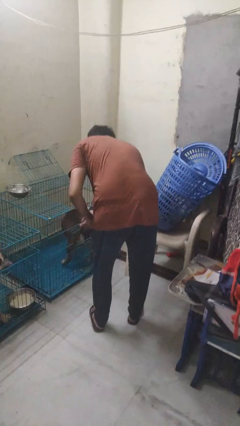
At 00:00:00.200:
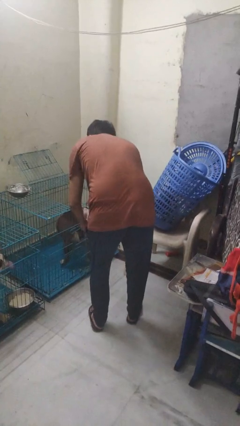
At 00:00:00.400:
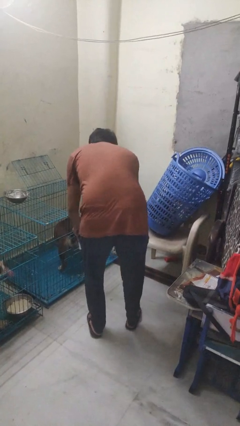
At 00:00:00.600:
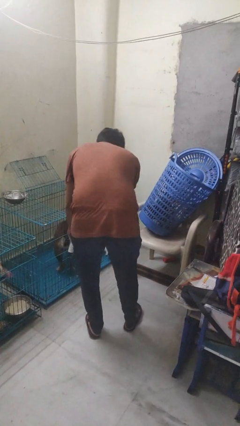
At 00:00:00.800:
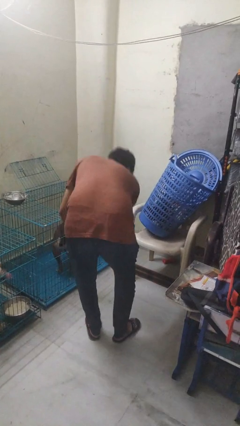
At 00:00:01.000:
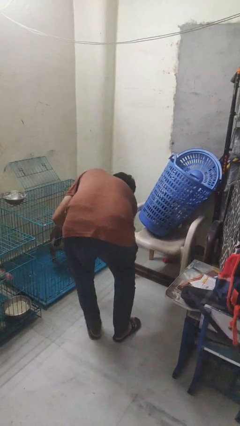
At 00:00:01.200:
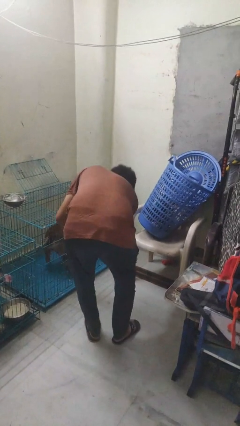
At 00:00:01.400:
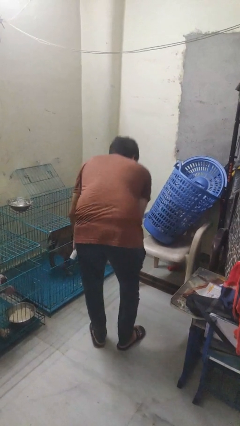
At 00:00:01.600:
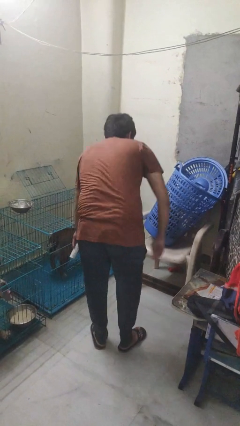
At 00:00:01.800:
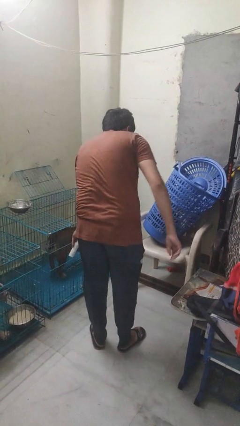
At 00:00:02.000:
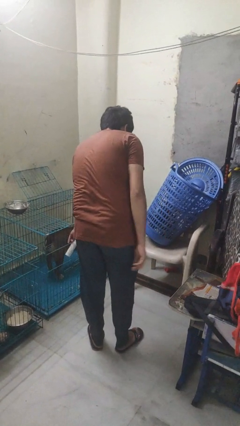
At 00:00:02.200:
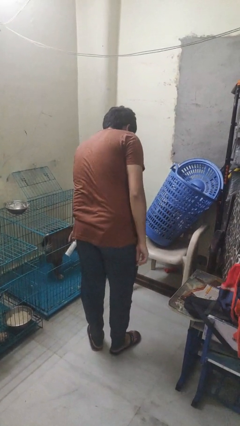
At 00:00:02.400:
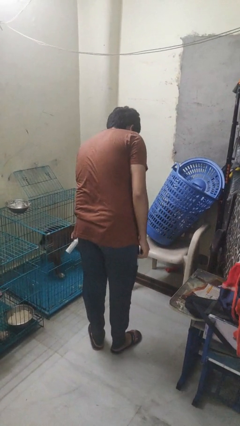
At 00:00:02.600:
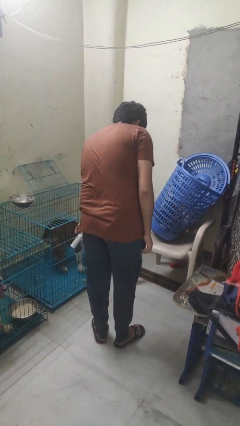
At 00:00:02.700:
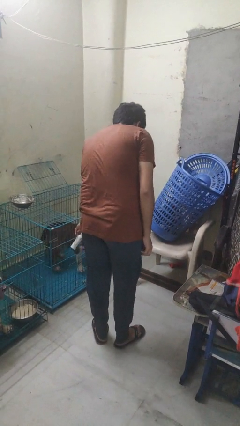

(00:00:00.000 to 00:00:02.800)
person crates dog

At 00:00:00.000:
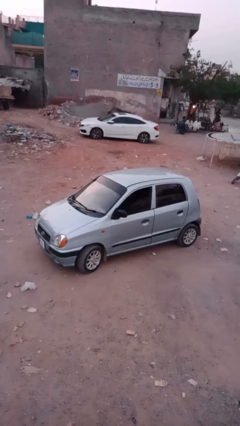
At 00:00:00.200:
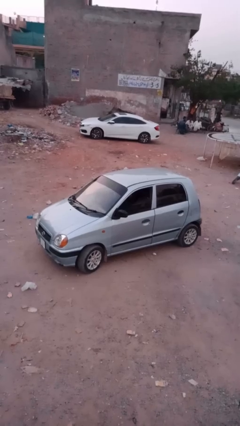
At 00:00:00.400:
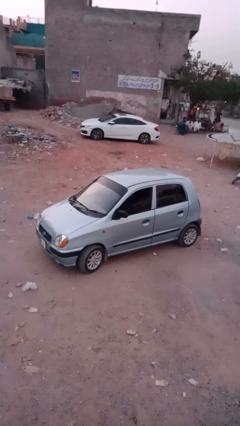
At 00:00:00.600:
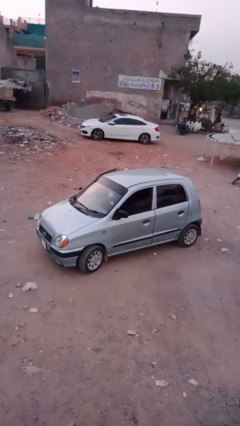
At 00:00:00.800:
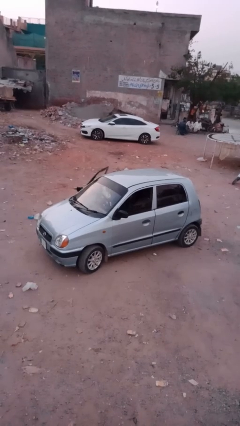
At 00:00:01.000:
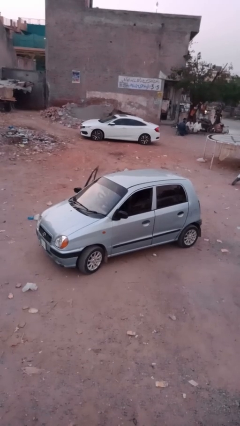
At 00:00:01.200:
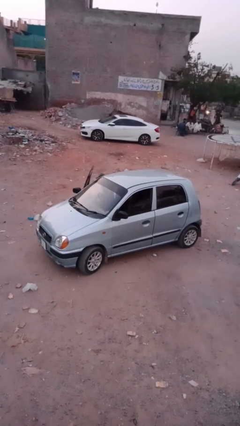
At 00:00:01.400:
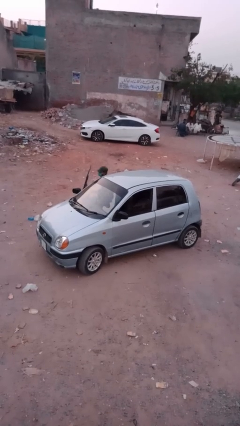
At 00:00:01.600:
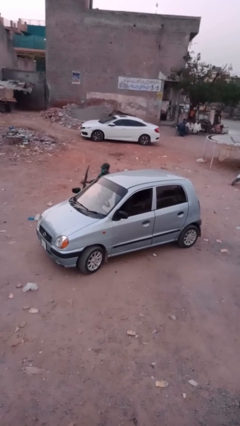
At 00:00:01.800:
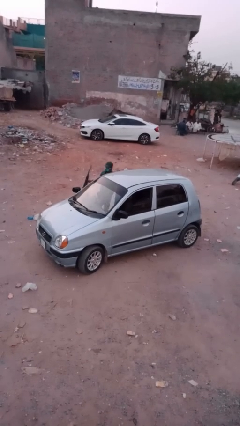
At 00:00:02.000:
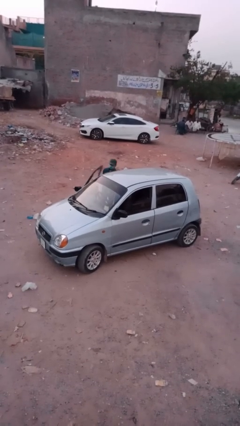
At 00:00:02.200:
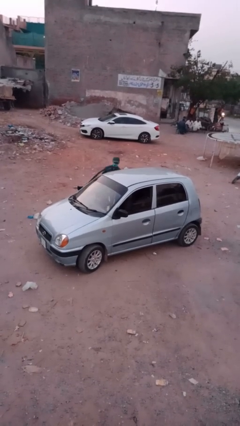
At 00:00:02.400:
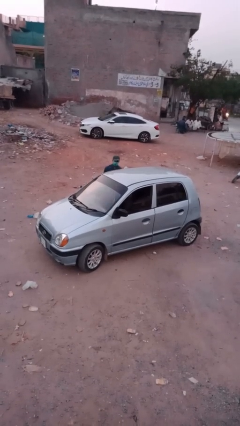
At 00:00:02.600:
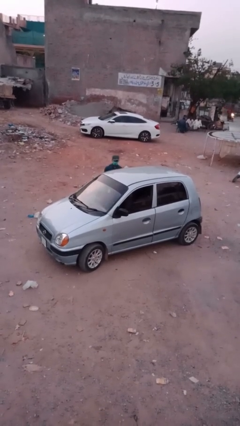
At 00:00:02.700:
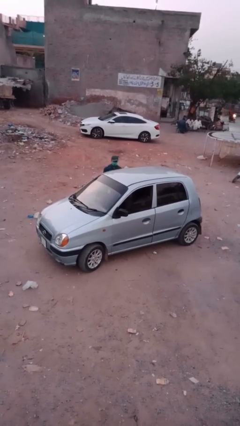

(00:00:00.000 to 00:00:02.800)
car drops off person

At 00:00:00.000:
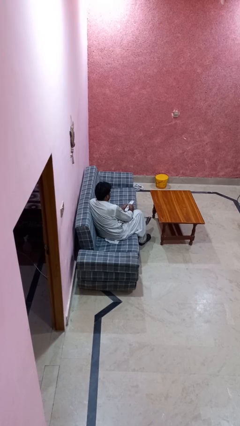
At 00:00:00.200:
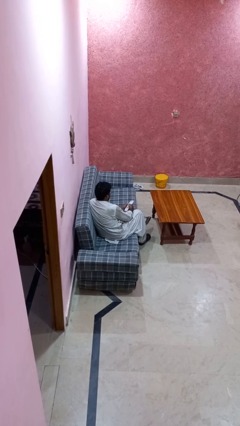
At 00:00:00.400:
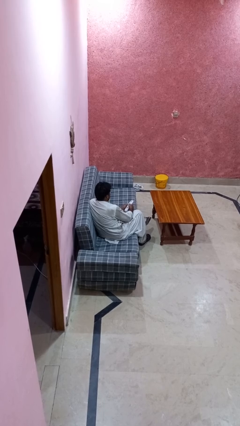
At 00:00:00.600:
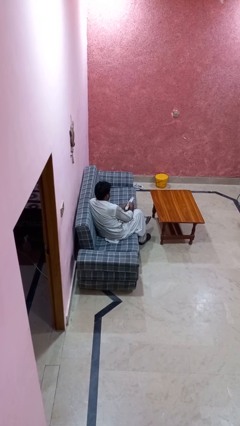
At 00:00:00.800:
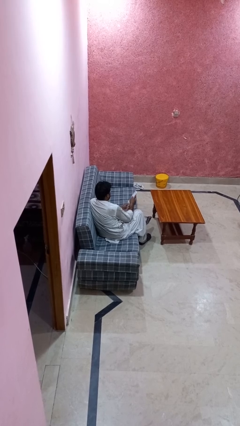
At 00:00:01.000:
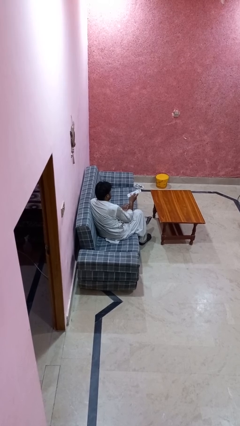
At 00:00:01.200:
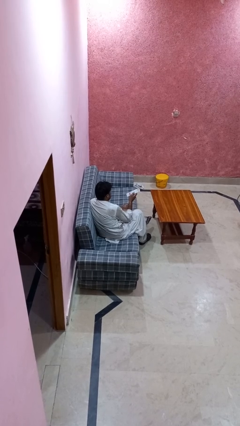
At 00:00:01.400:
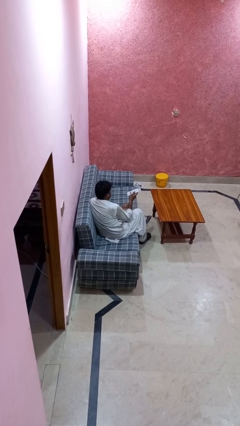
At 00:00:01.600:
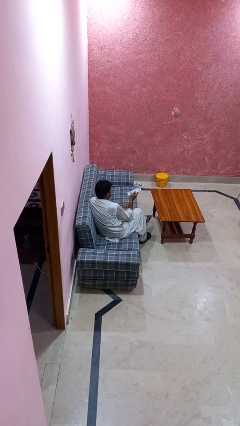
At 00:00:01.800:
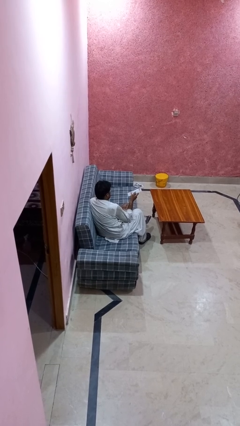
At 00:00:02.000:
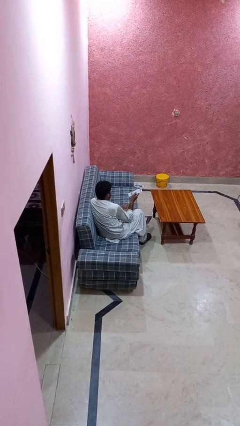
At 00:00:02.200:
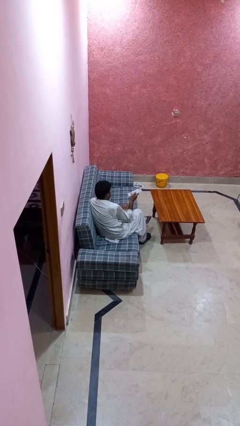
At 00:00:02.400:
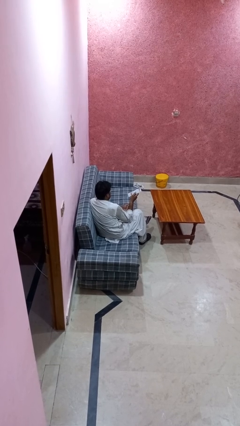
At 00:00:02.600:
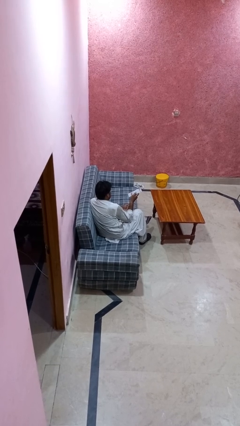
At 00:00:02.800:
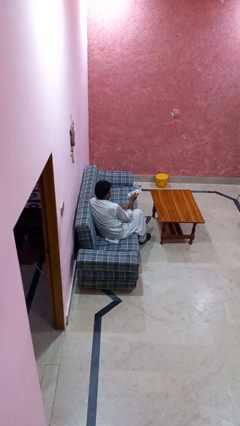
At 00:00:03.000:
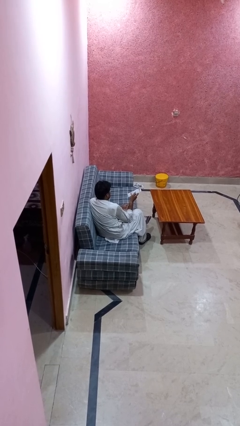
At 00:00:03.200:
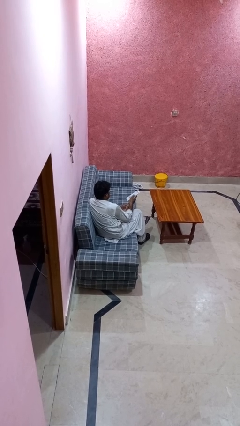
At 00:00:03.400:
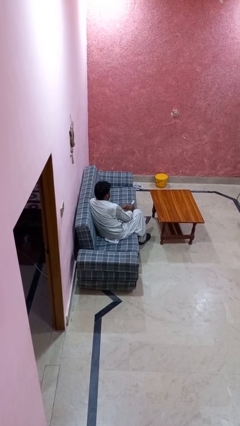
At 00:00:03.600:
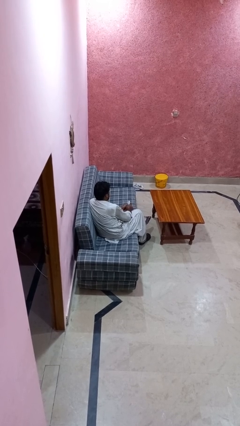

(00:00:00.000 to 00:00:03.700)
person uses television remote

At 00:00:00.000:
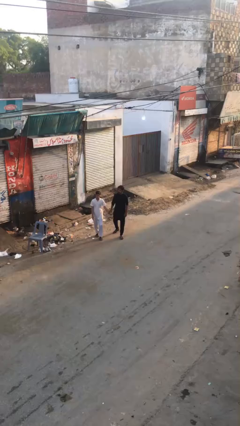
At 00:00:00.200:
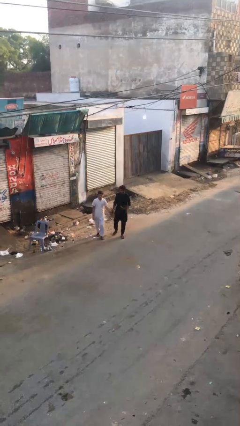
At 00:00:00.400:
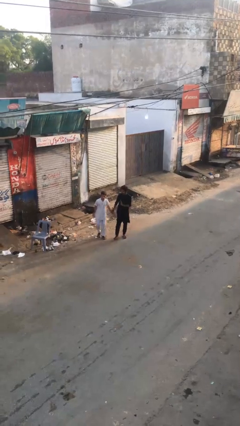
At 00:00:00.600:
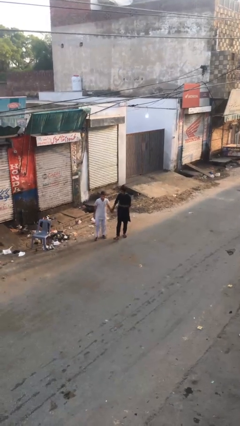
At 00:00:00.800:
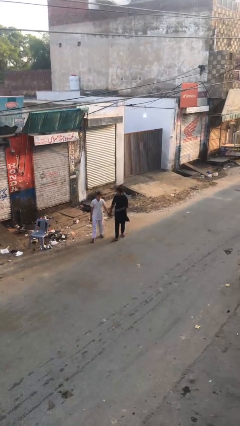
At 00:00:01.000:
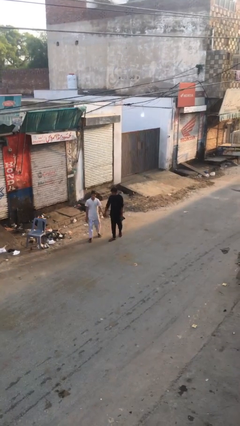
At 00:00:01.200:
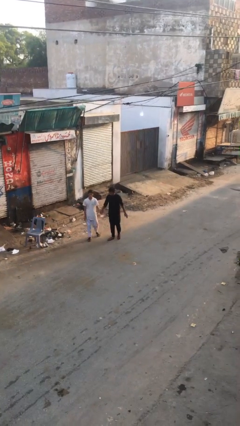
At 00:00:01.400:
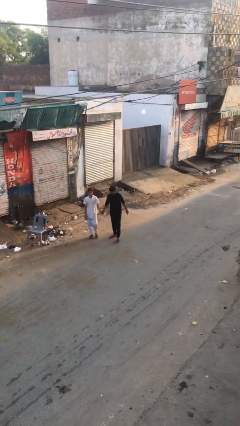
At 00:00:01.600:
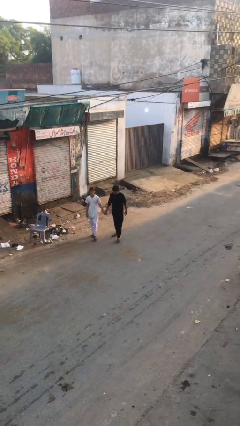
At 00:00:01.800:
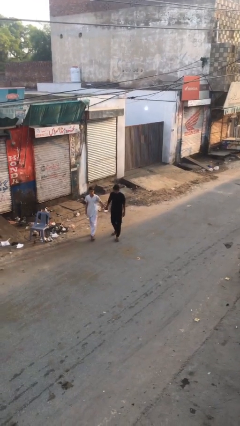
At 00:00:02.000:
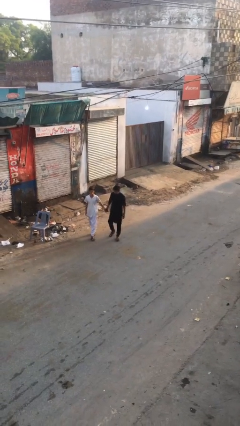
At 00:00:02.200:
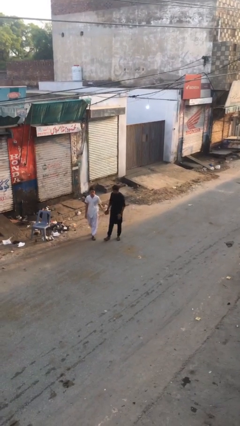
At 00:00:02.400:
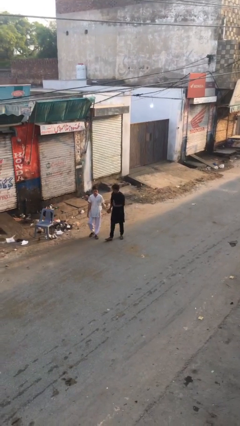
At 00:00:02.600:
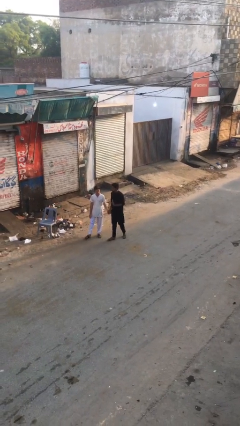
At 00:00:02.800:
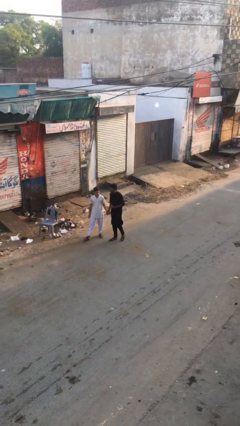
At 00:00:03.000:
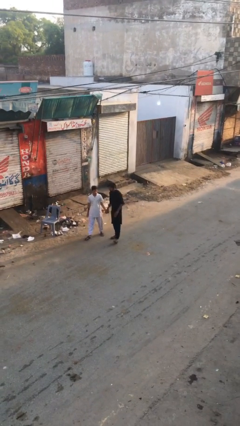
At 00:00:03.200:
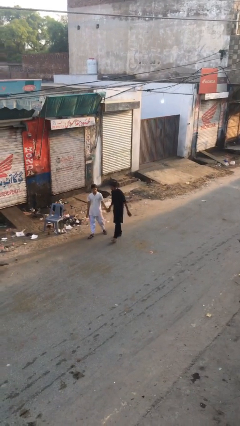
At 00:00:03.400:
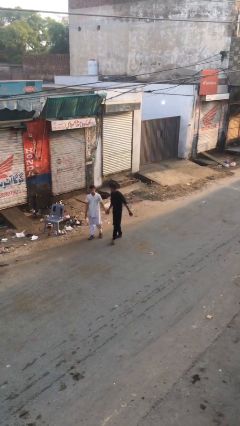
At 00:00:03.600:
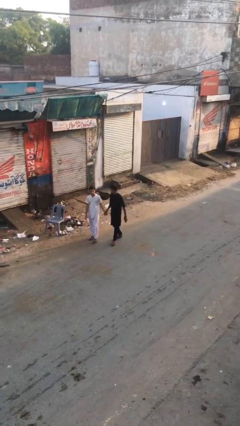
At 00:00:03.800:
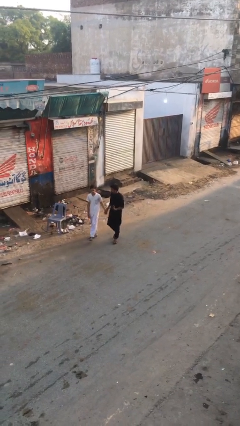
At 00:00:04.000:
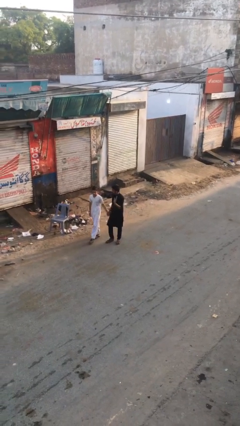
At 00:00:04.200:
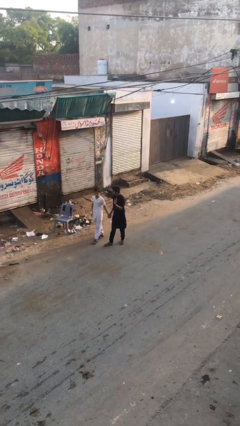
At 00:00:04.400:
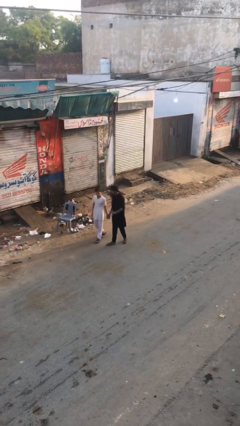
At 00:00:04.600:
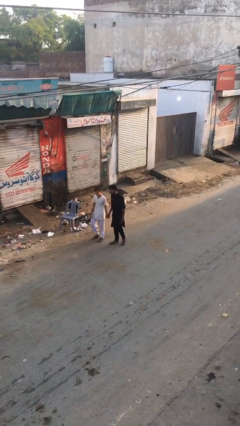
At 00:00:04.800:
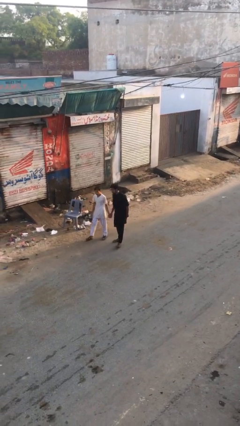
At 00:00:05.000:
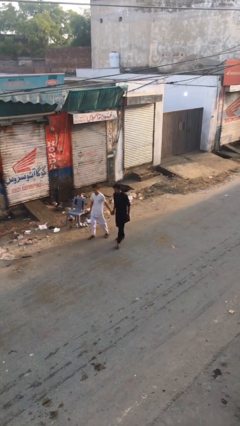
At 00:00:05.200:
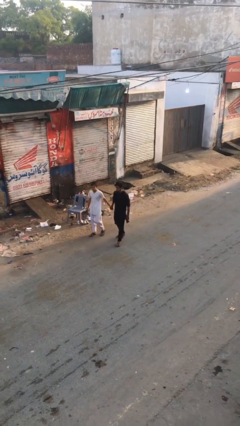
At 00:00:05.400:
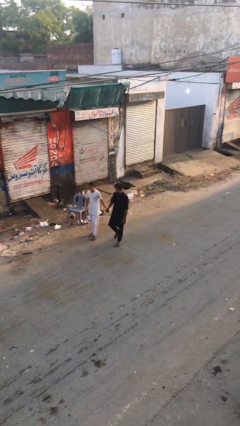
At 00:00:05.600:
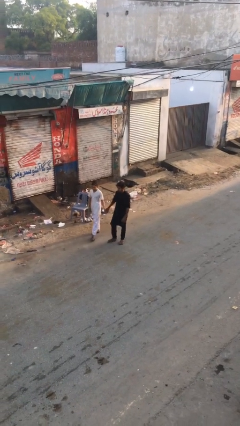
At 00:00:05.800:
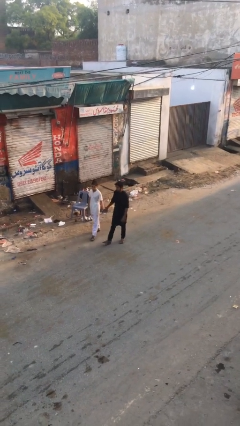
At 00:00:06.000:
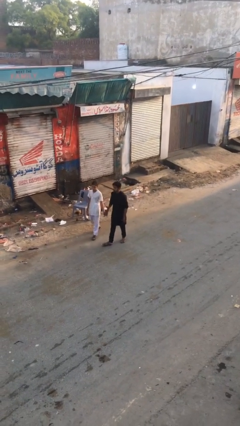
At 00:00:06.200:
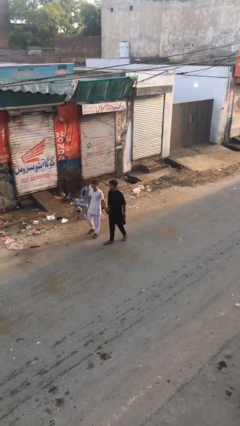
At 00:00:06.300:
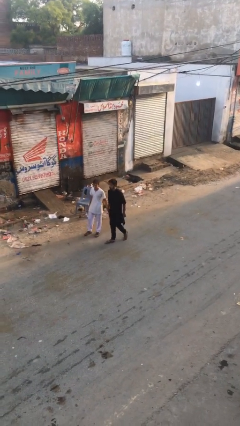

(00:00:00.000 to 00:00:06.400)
person holds hand

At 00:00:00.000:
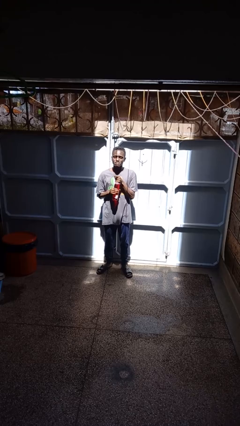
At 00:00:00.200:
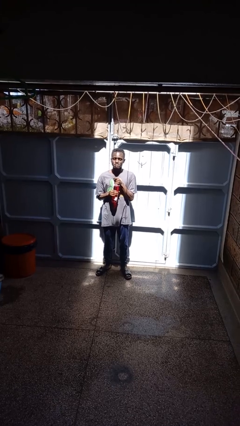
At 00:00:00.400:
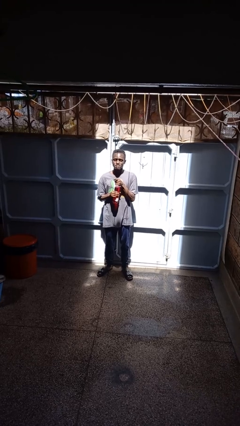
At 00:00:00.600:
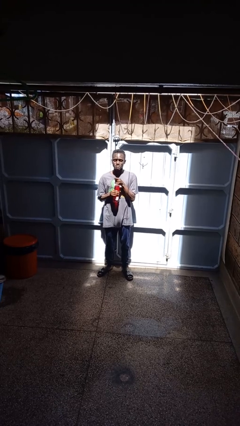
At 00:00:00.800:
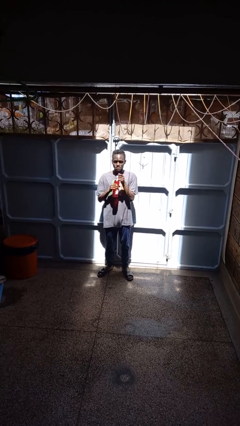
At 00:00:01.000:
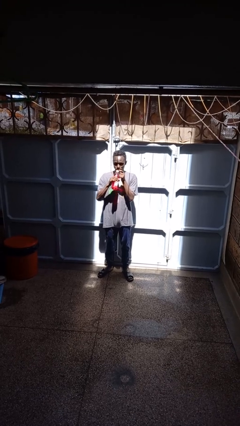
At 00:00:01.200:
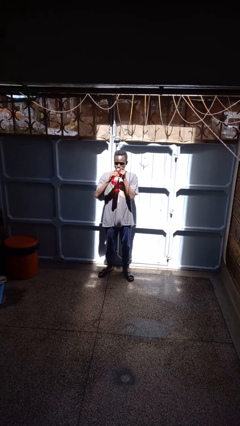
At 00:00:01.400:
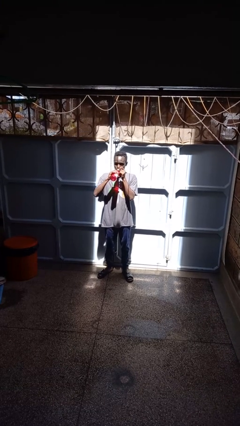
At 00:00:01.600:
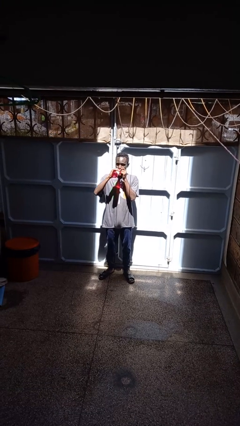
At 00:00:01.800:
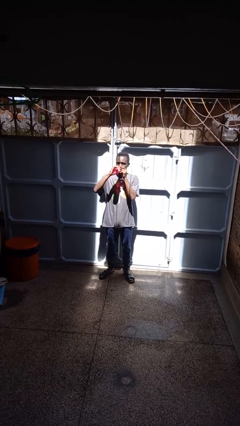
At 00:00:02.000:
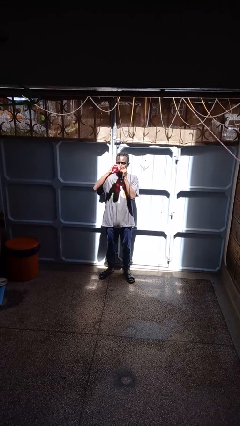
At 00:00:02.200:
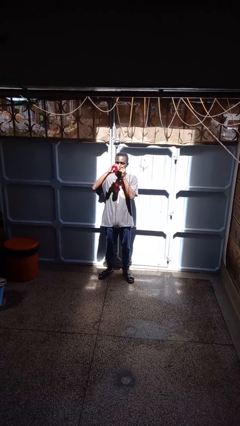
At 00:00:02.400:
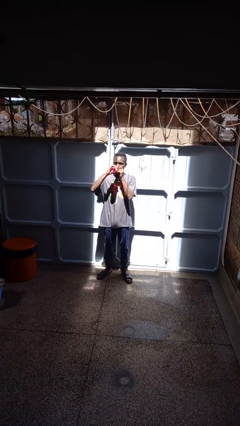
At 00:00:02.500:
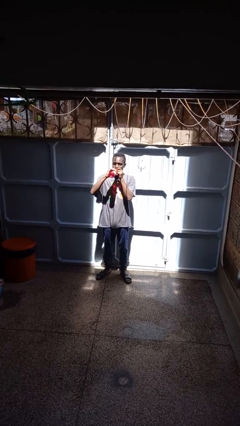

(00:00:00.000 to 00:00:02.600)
person drinks from beverage can
